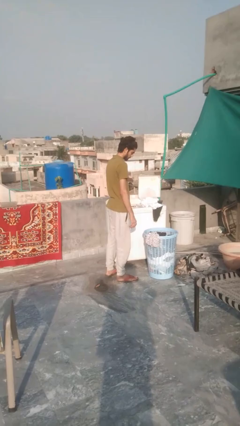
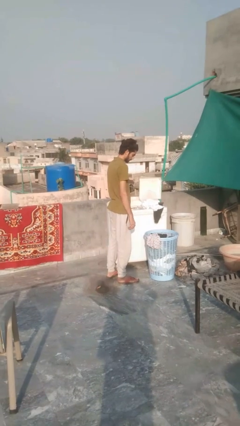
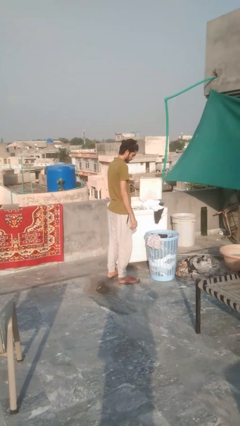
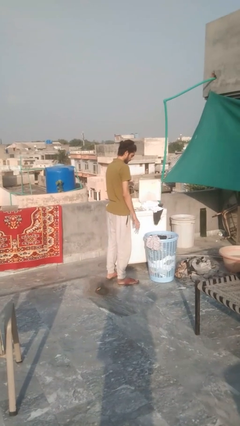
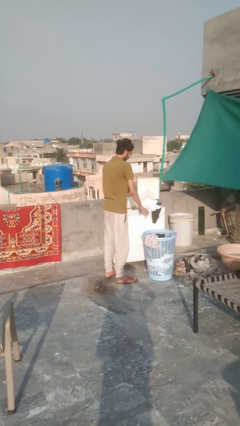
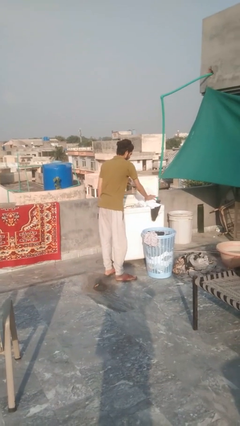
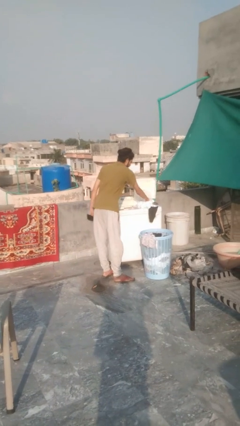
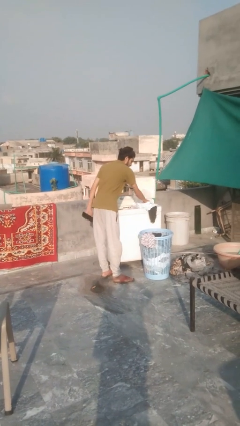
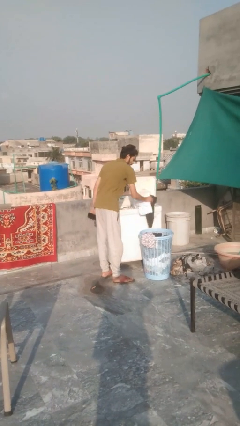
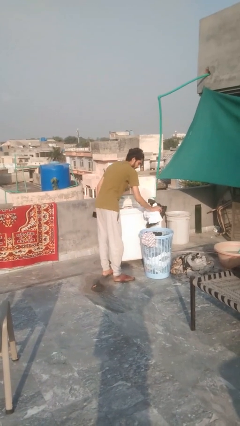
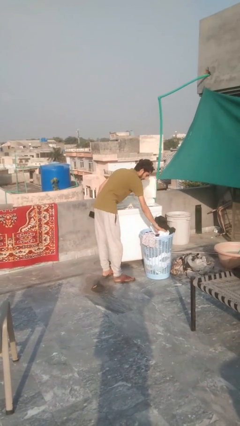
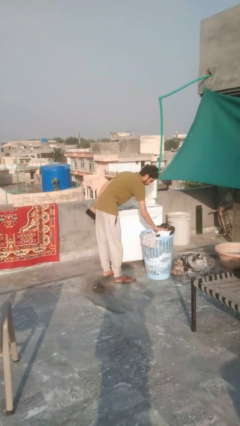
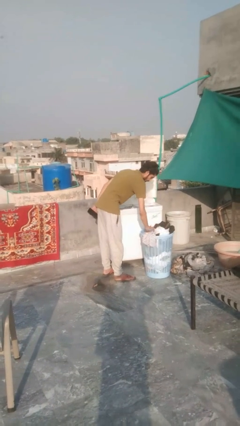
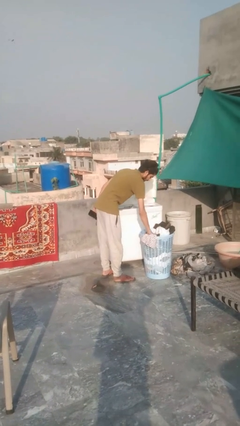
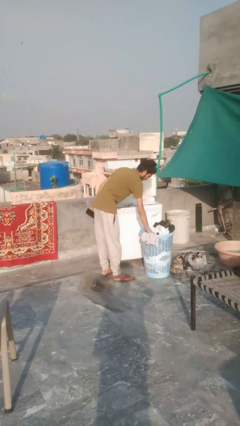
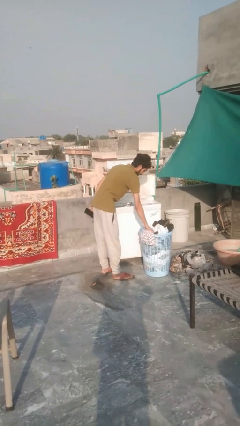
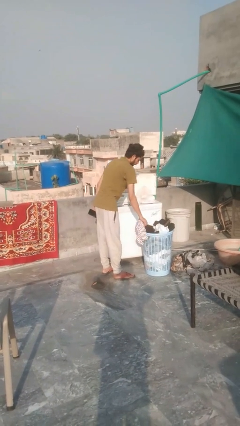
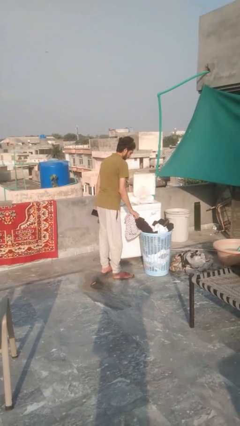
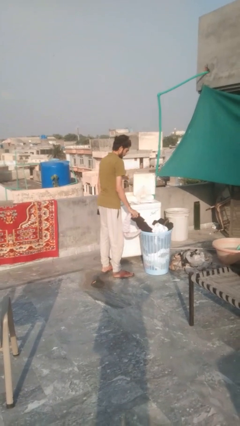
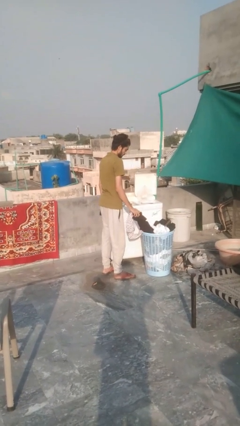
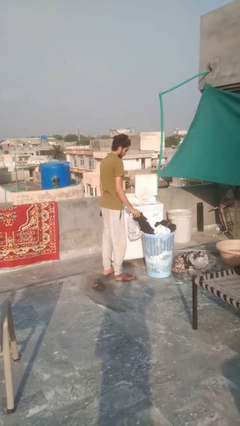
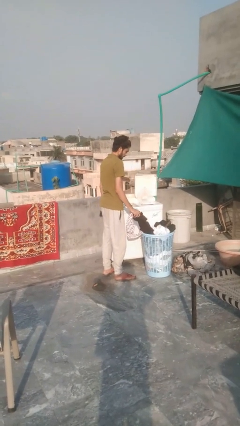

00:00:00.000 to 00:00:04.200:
person unloads clotheswasher

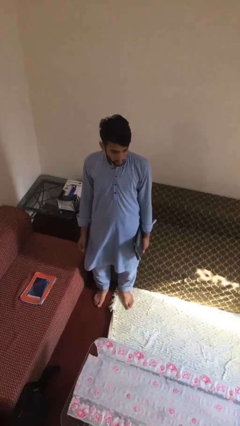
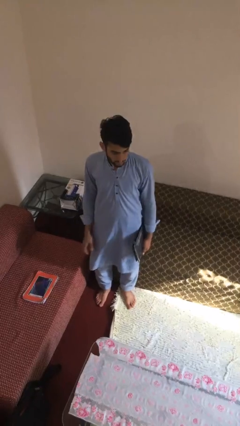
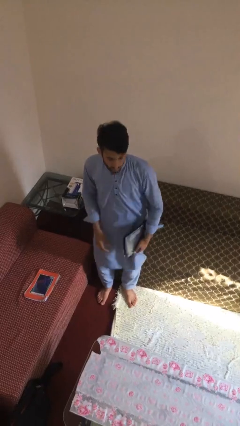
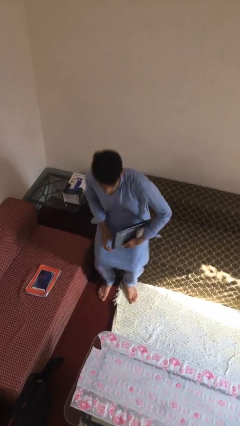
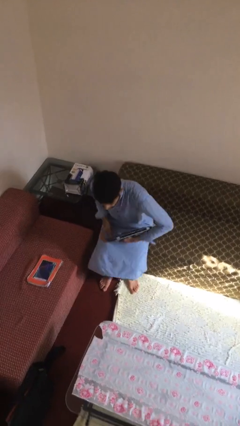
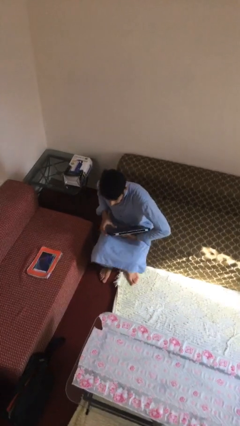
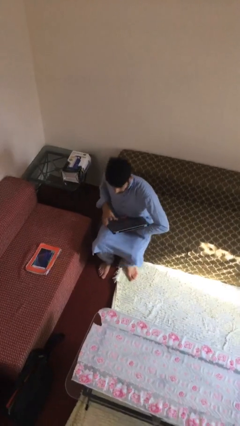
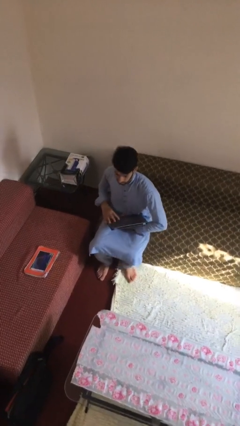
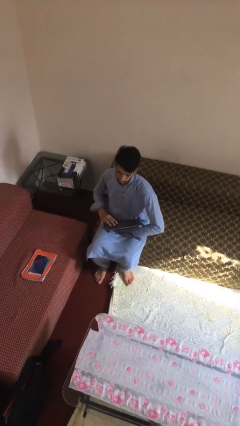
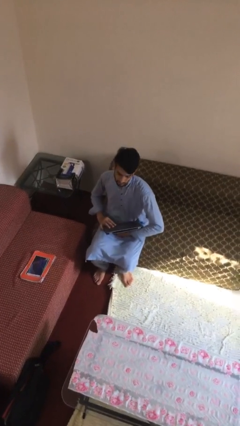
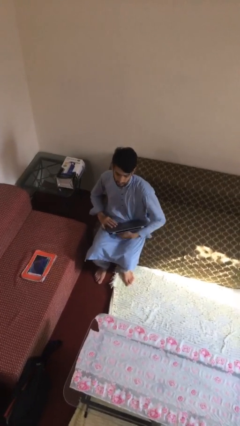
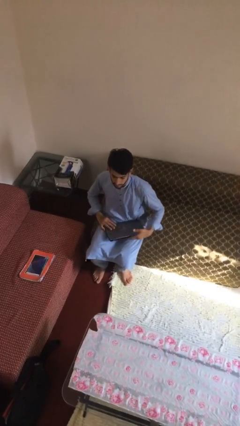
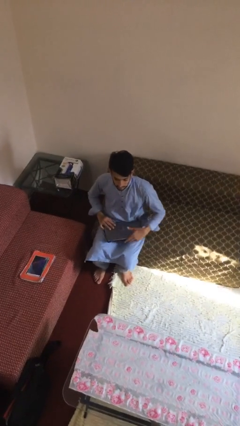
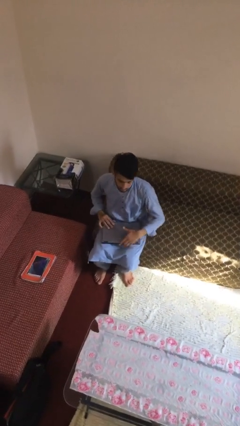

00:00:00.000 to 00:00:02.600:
person sits down

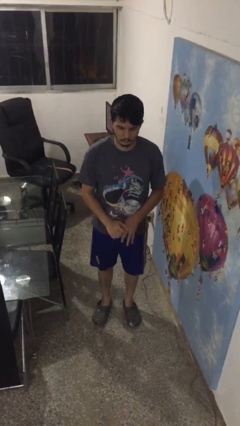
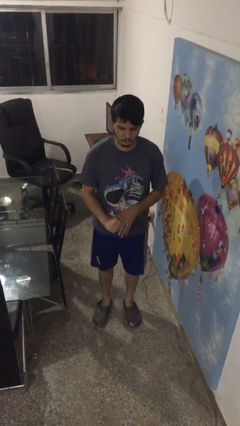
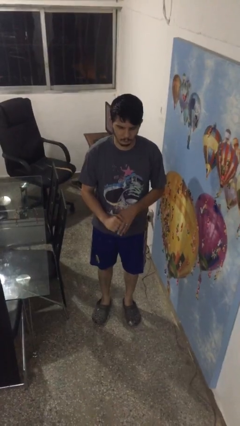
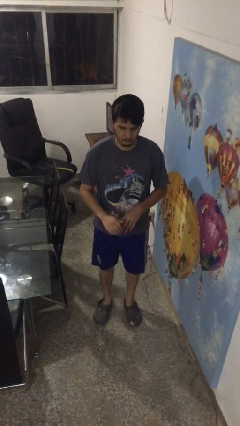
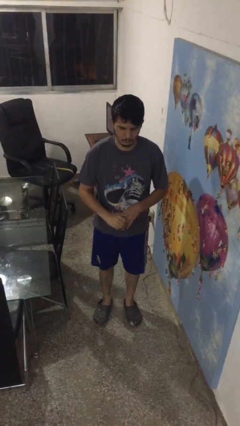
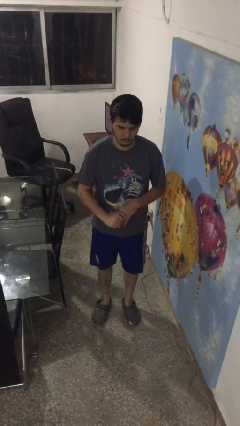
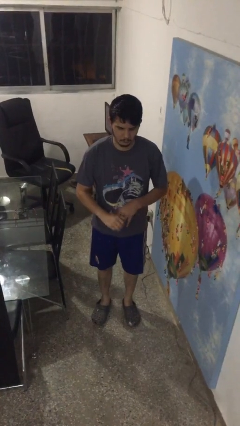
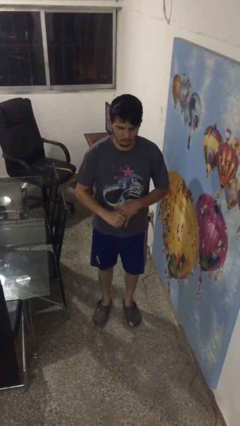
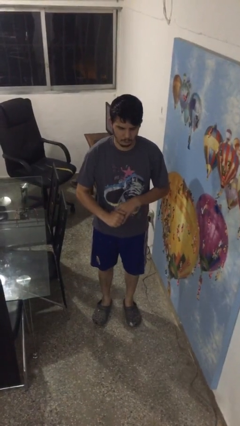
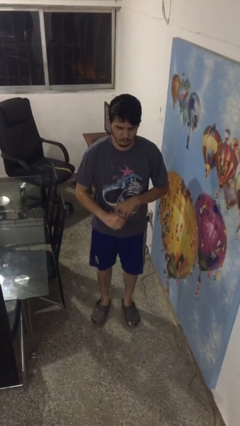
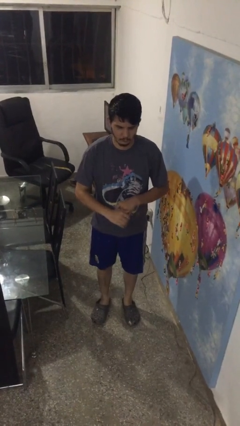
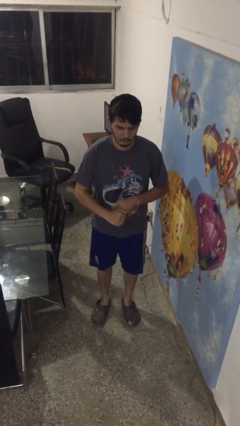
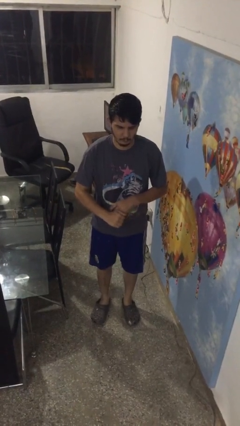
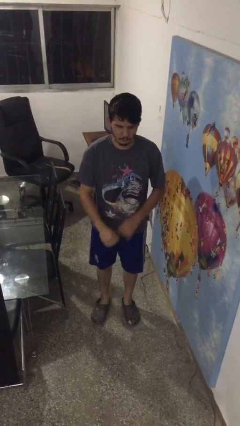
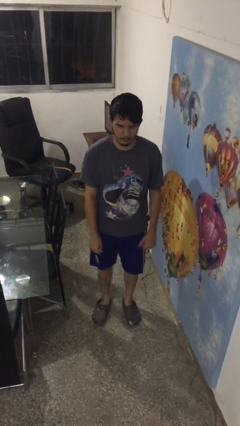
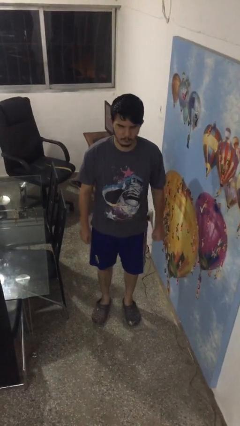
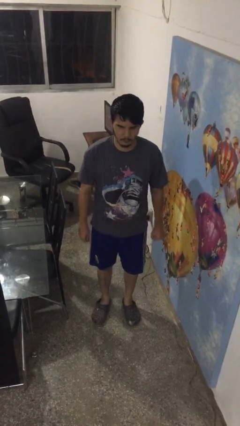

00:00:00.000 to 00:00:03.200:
person cracks knuckles

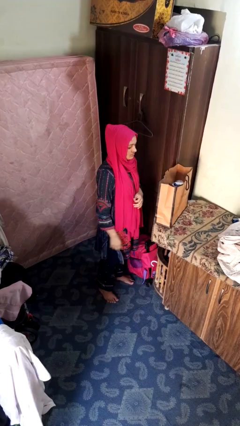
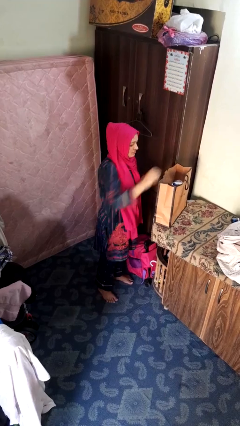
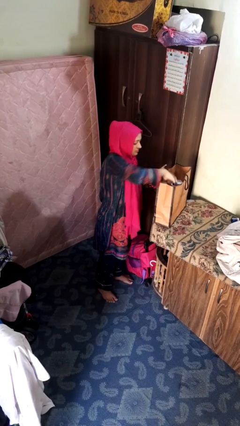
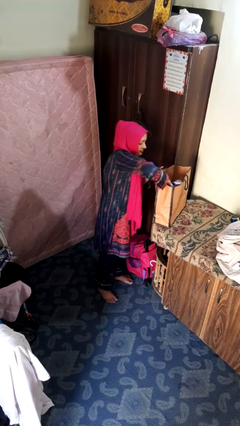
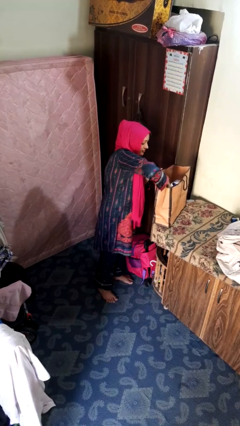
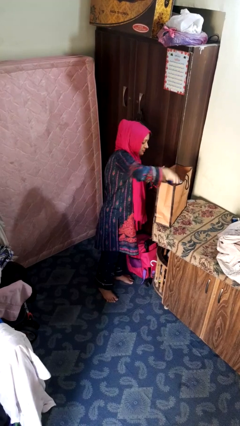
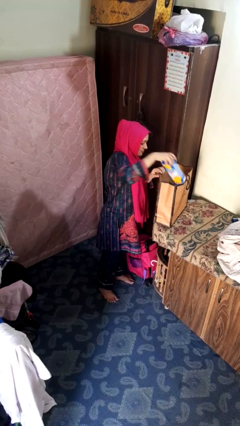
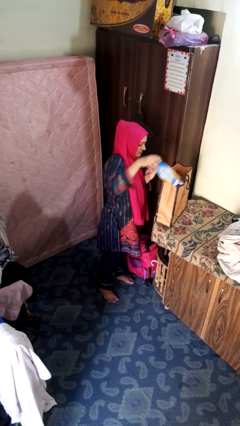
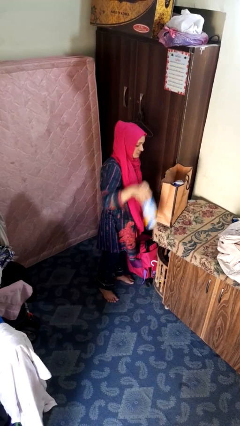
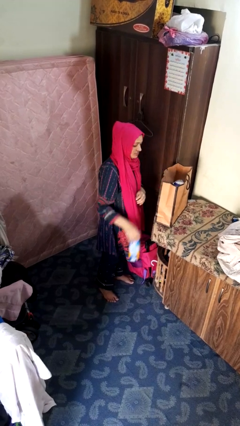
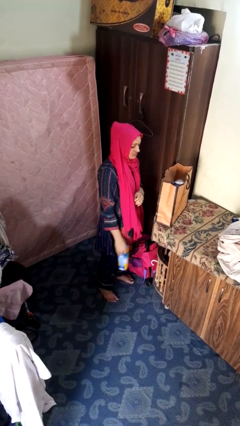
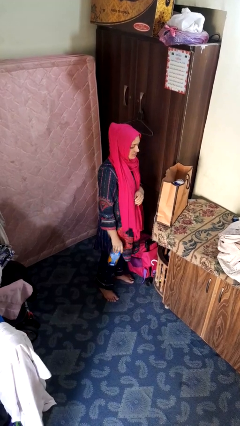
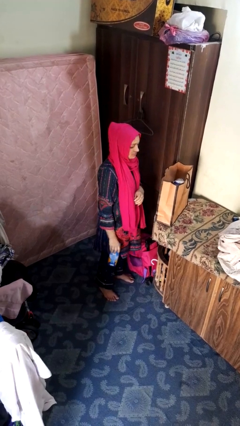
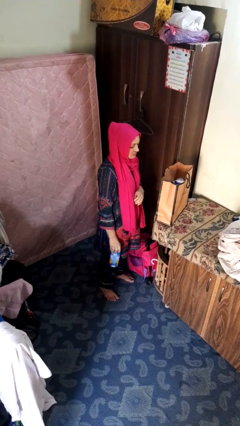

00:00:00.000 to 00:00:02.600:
person takes object from bag

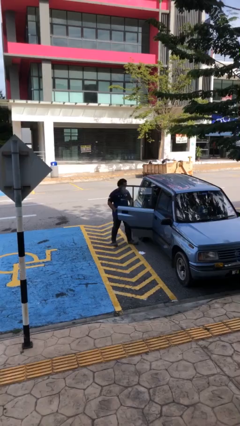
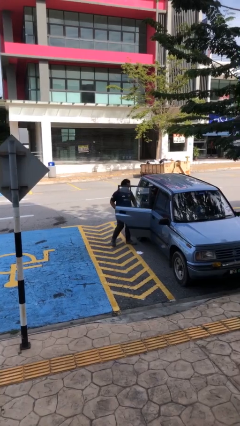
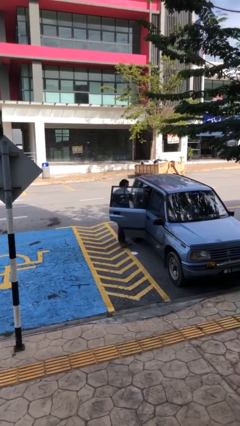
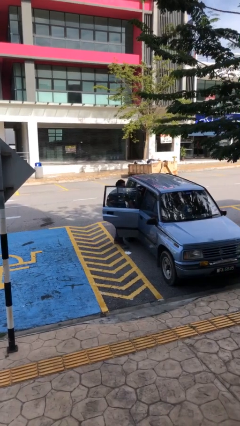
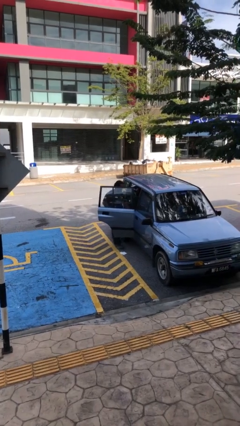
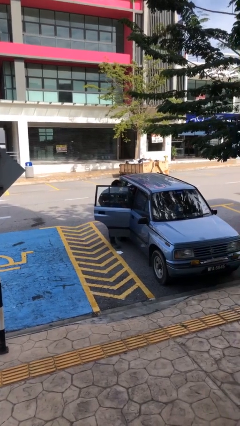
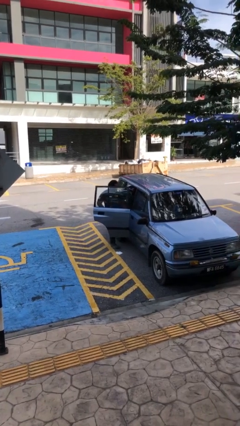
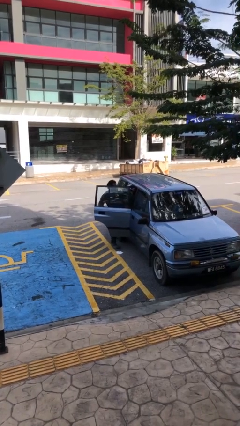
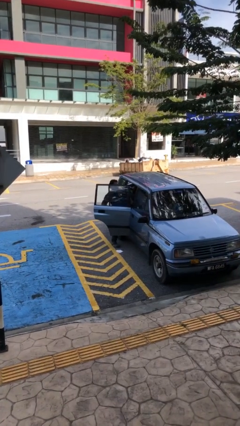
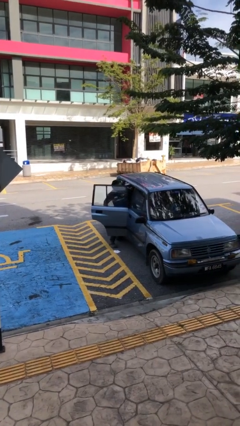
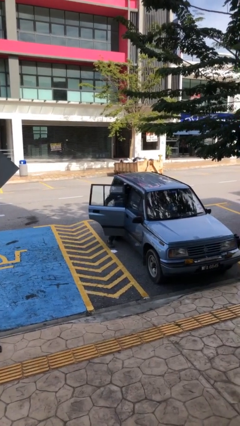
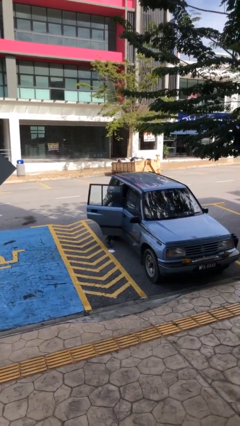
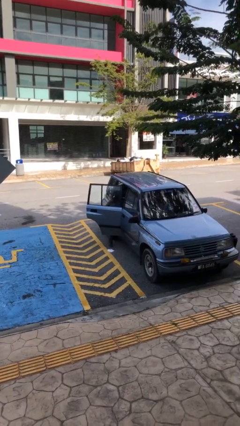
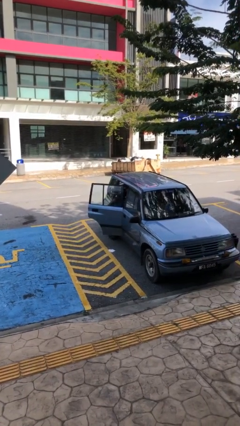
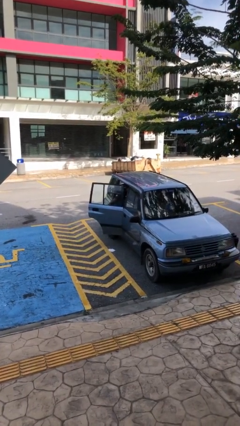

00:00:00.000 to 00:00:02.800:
person enters car

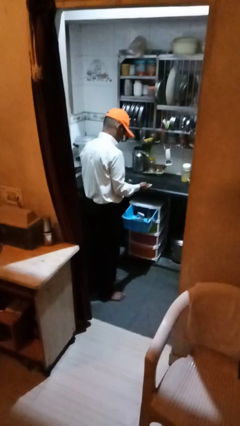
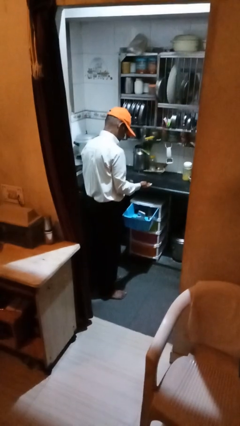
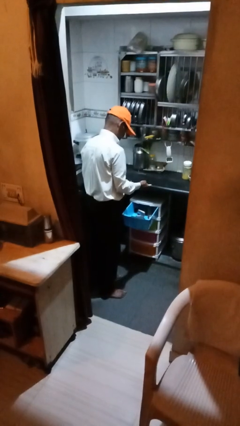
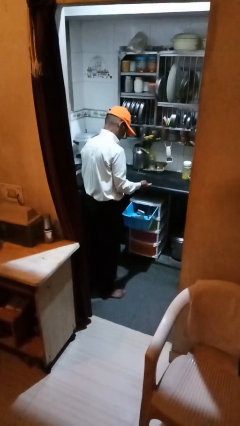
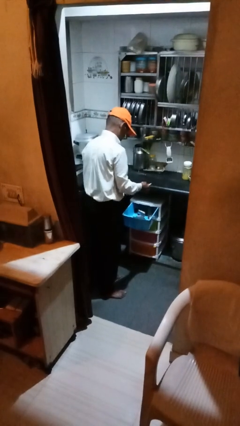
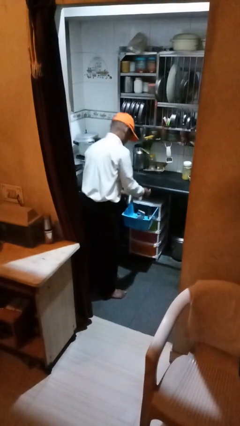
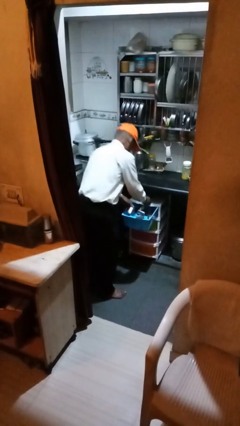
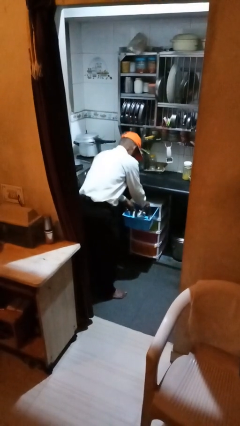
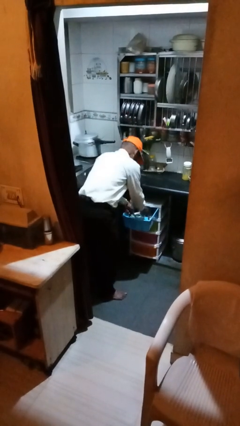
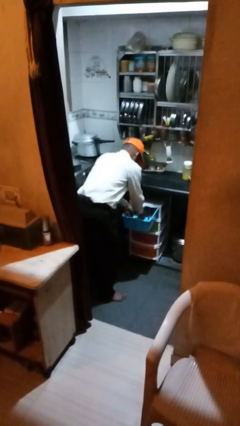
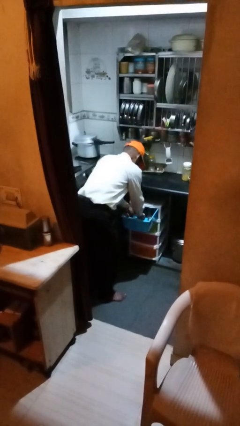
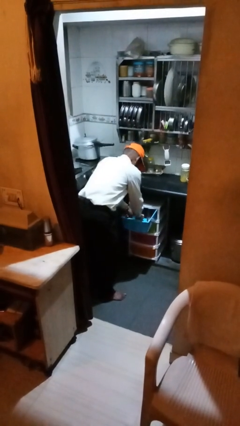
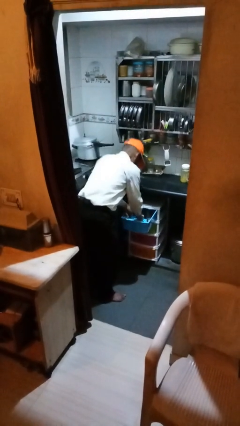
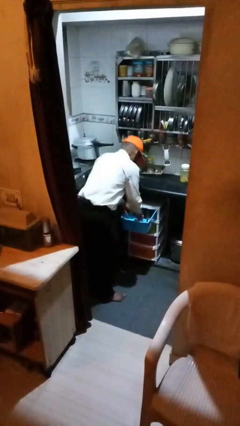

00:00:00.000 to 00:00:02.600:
person puts object into kitchen drawer
